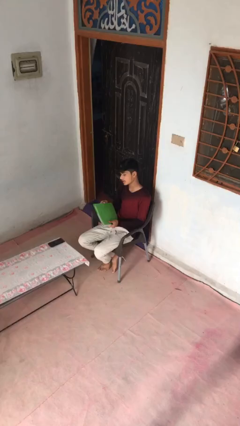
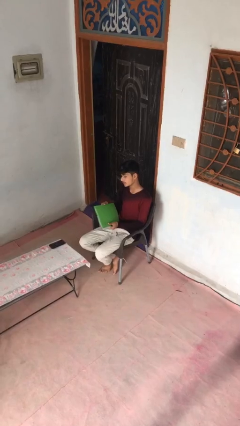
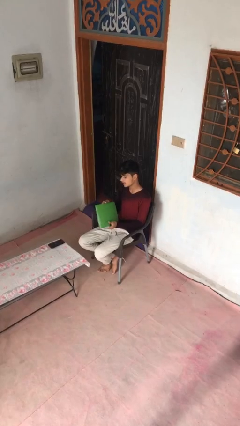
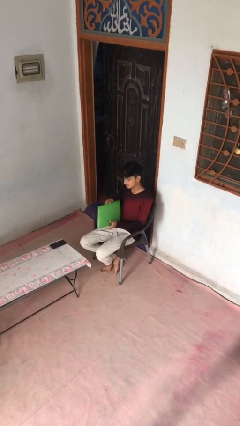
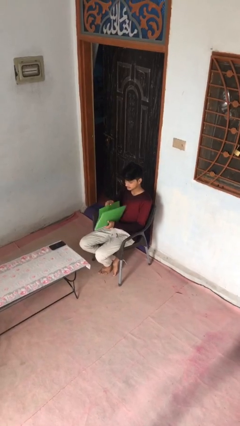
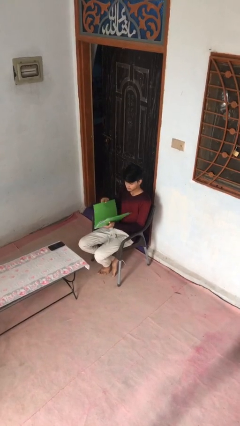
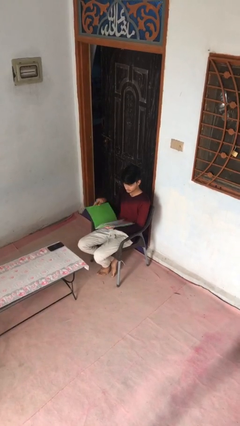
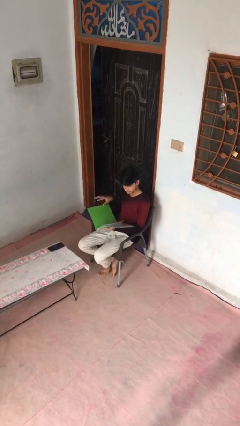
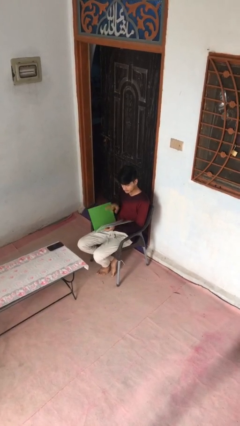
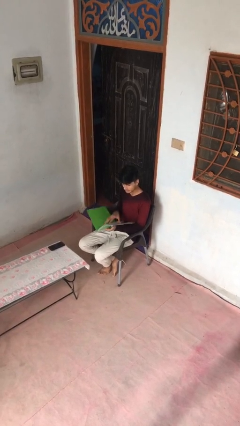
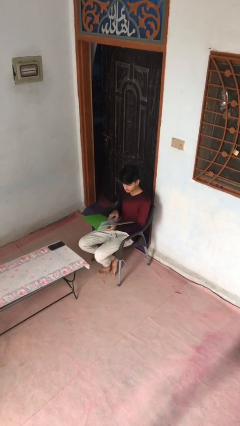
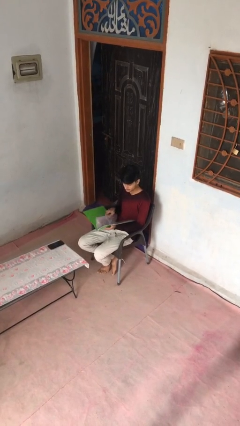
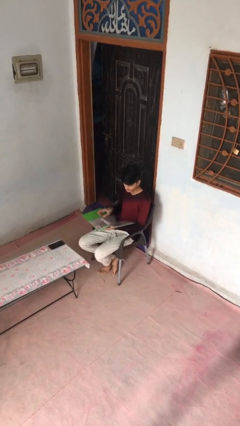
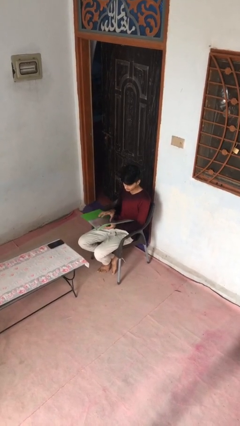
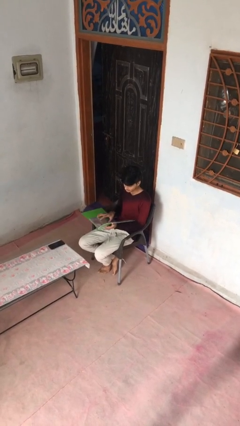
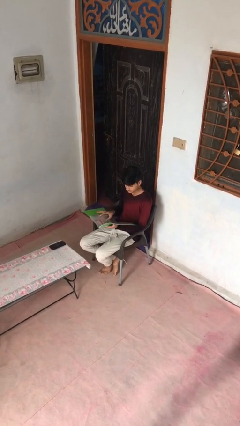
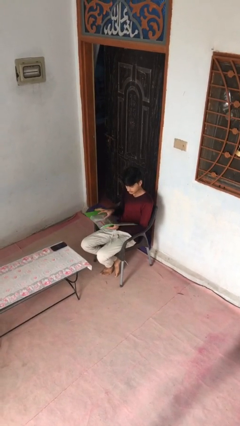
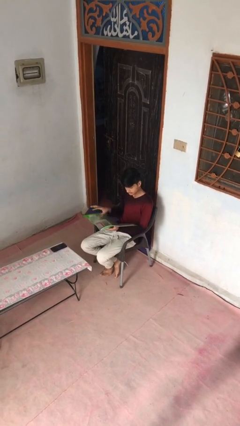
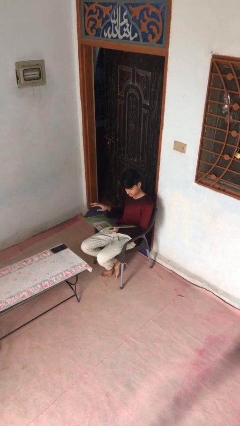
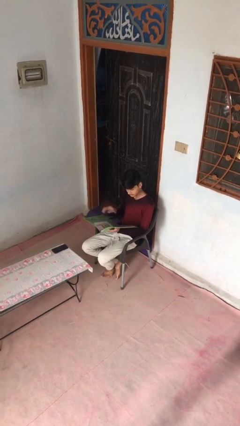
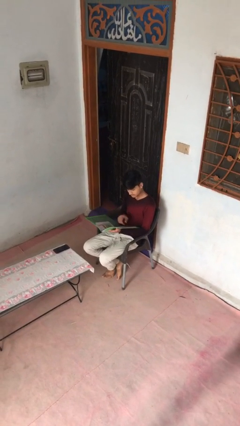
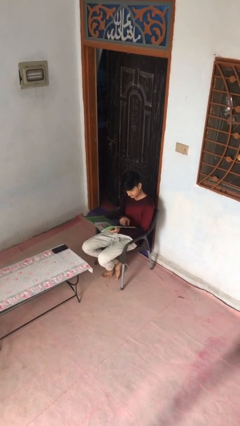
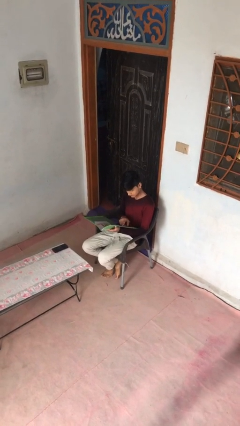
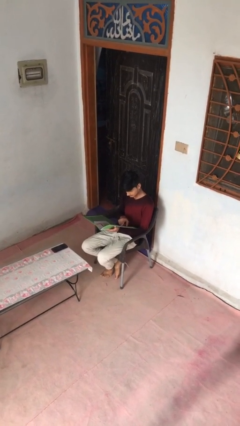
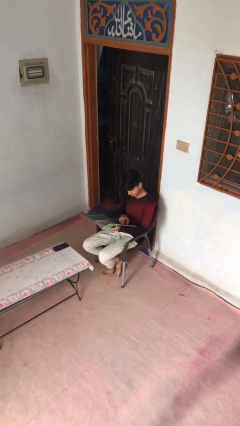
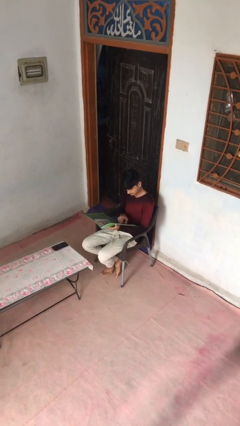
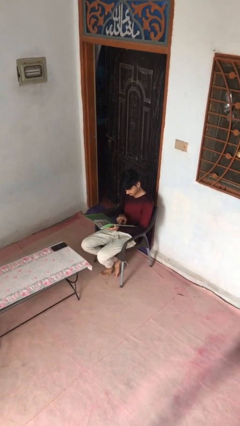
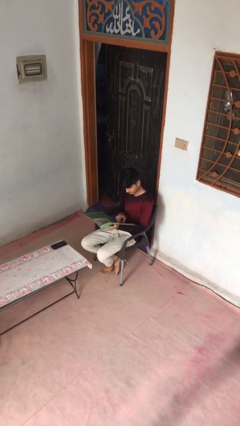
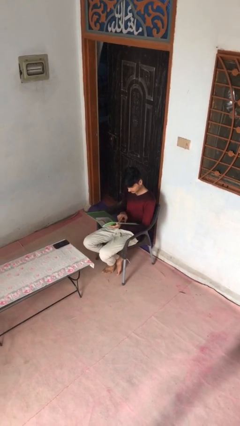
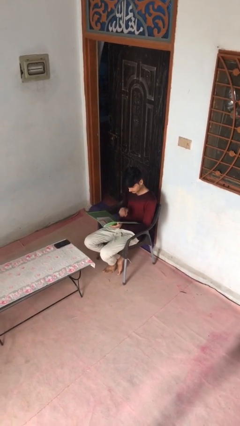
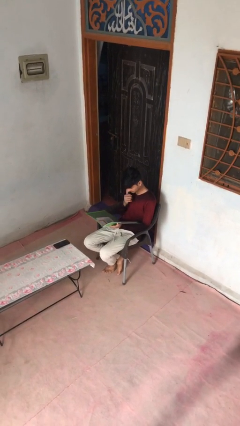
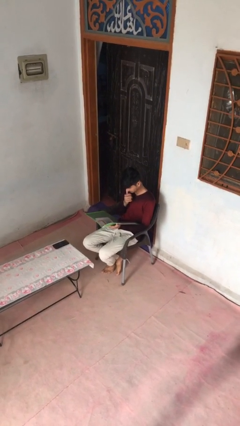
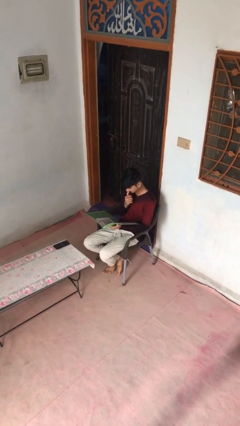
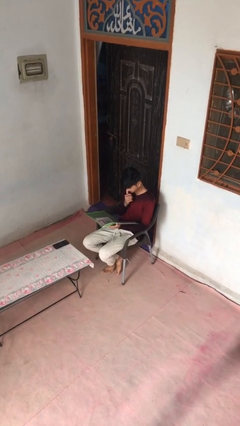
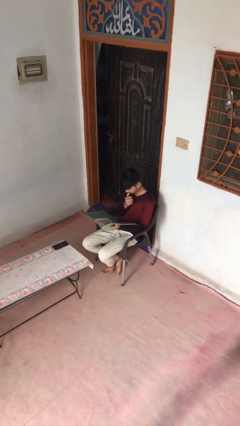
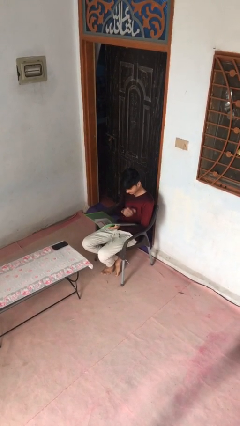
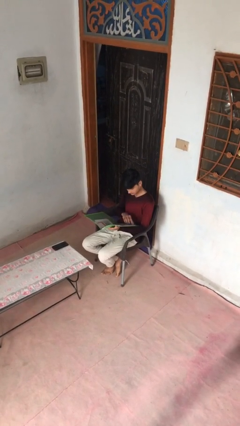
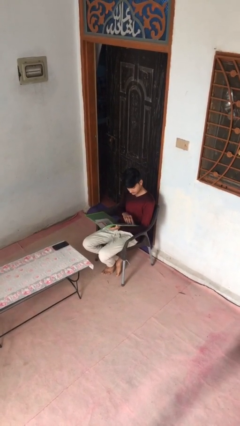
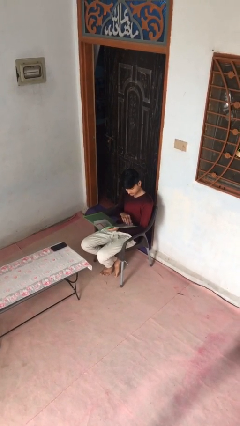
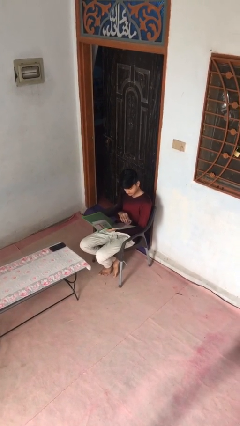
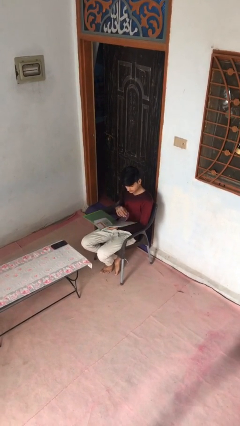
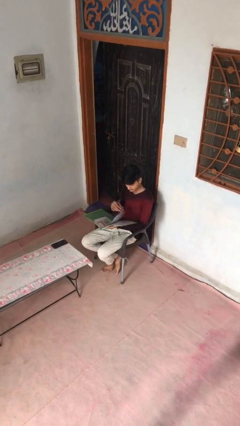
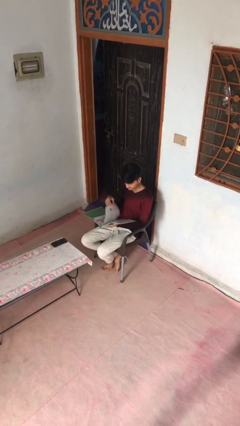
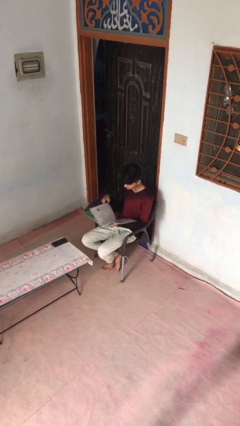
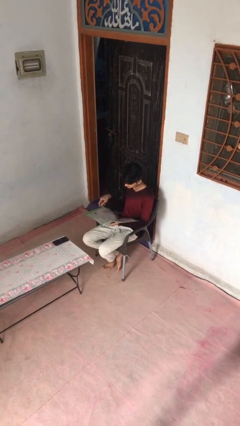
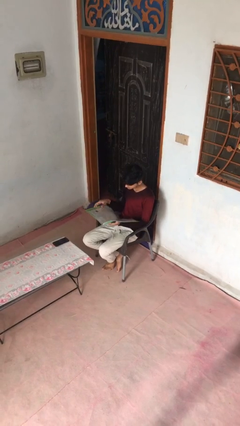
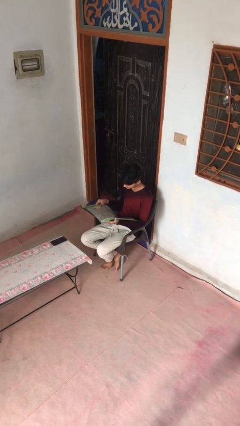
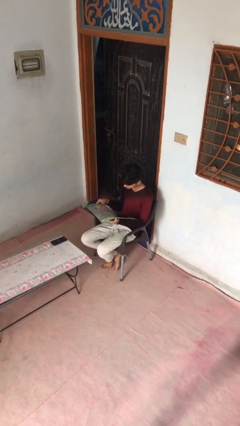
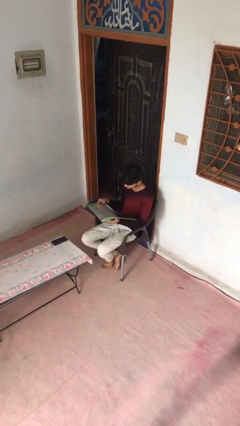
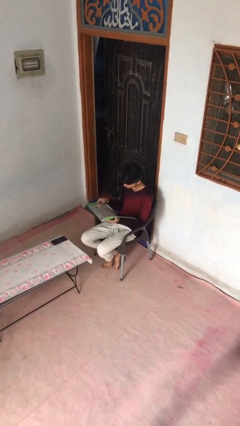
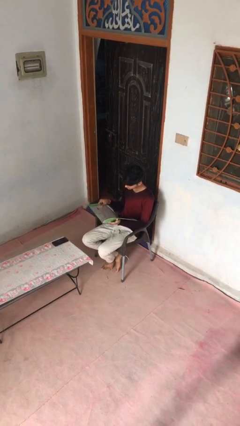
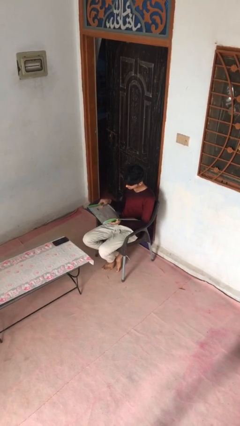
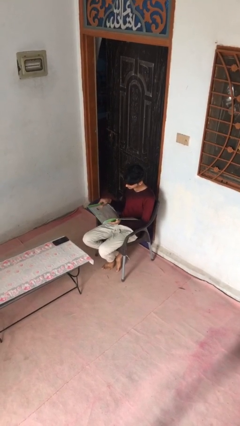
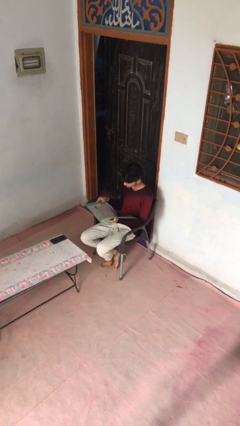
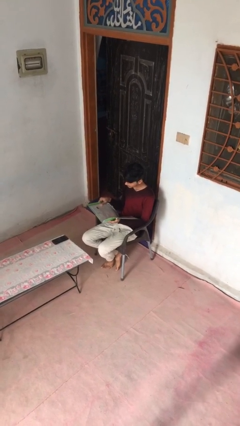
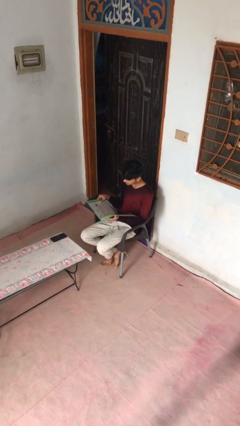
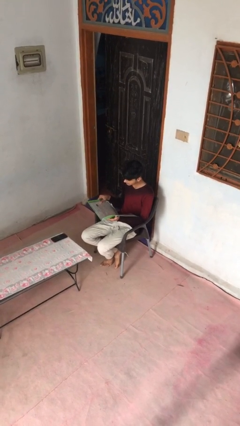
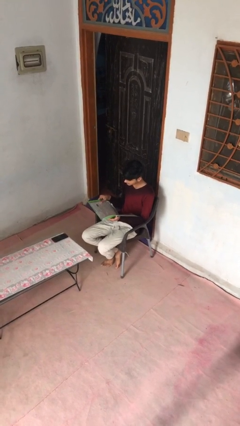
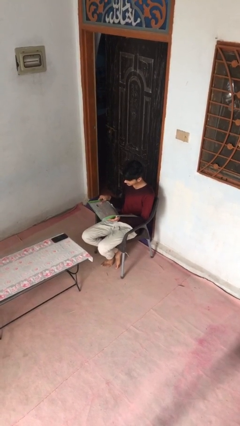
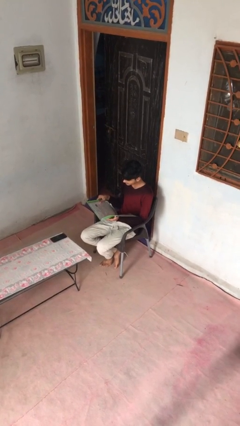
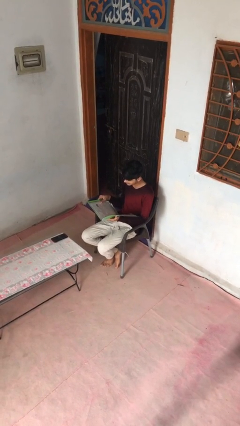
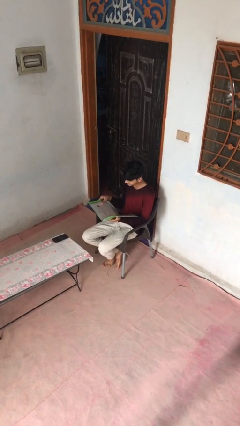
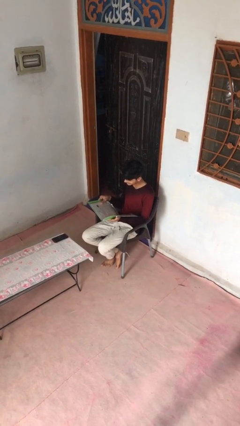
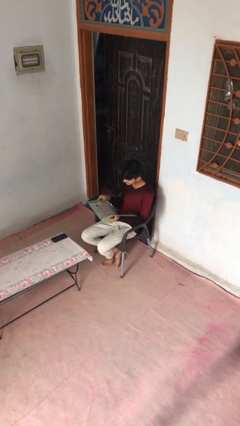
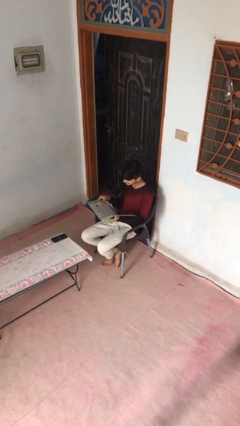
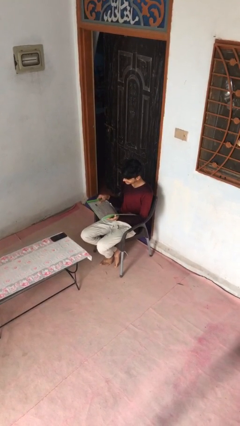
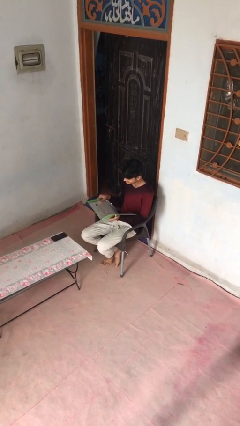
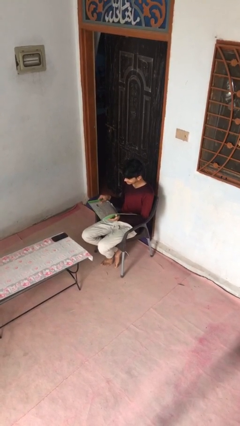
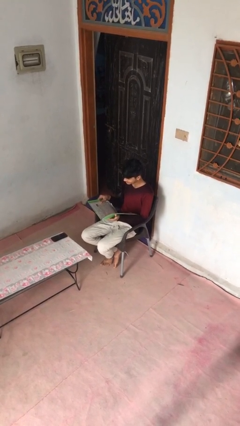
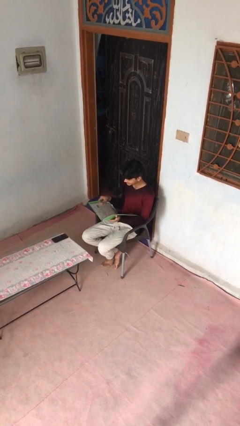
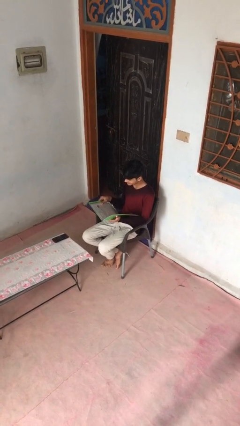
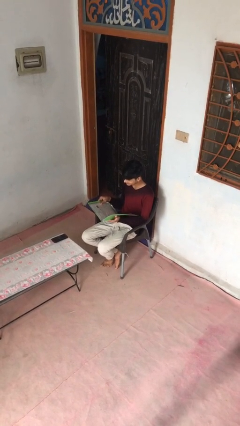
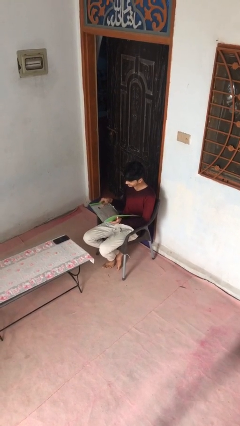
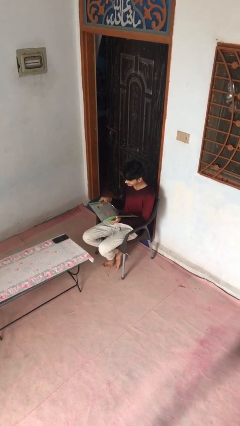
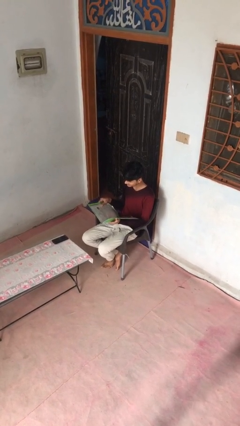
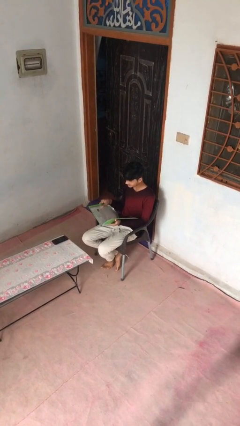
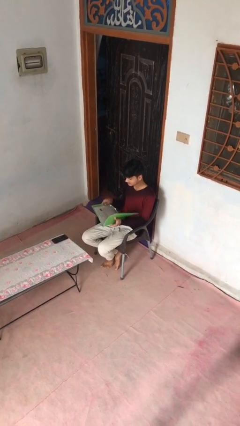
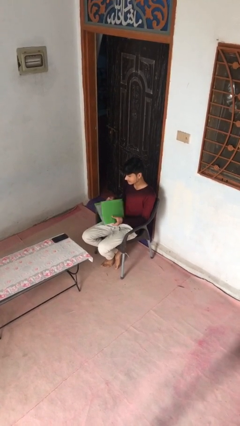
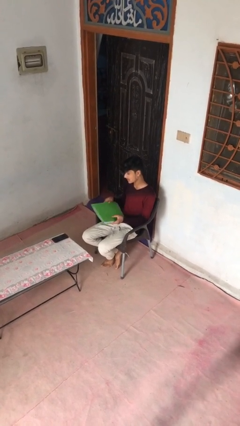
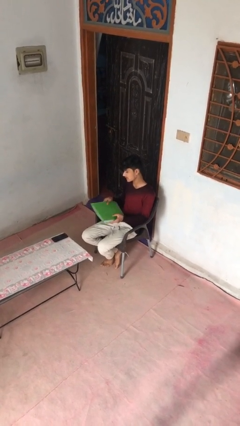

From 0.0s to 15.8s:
person reads document

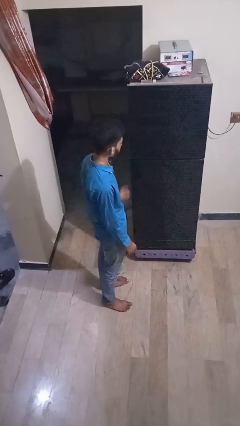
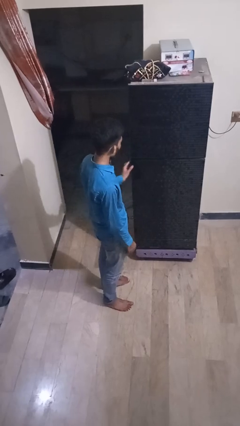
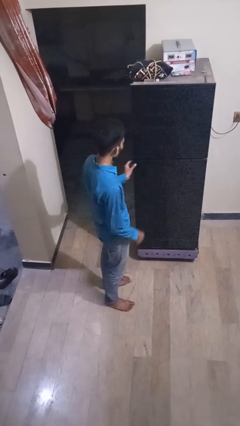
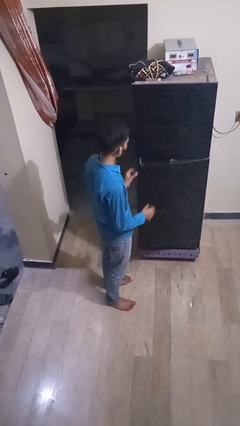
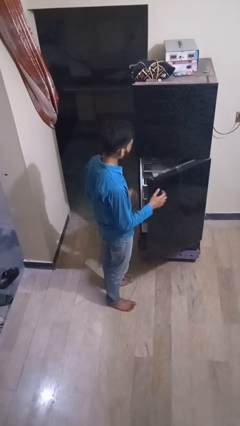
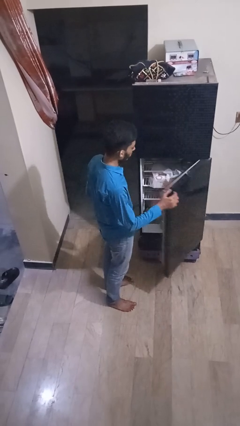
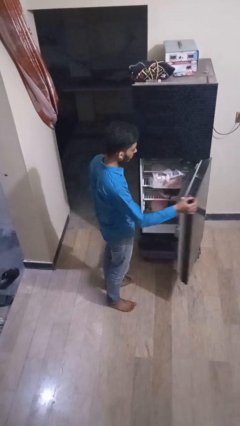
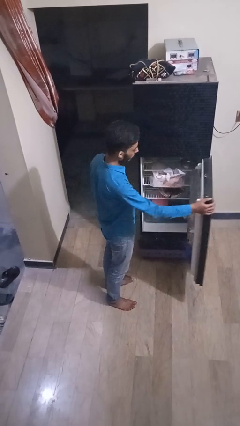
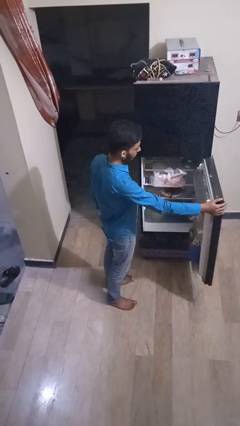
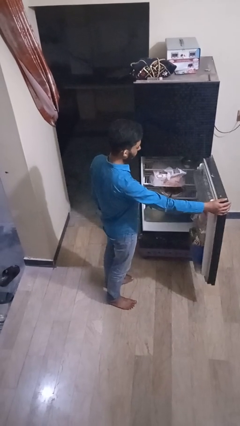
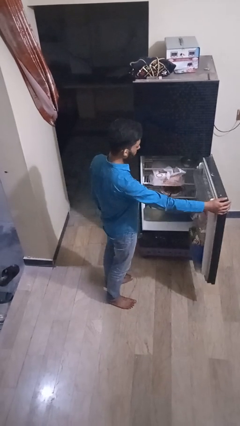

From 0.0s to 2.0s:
person opens refrigerator

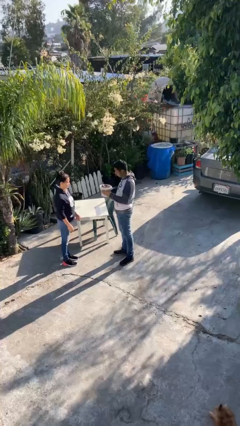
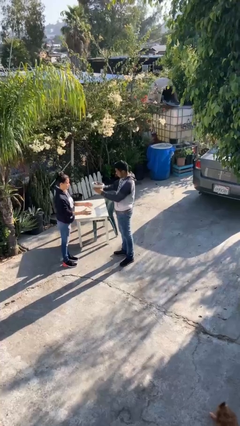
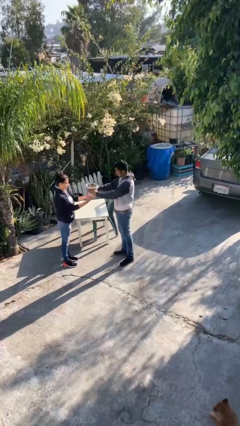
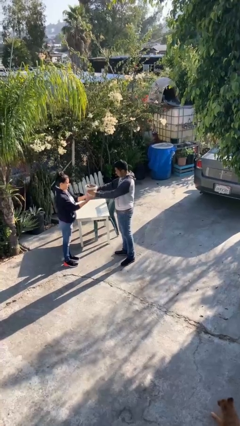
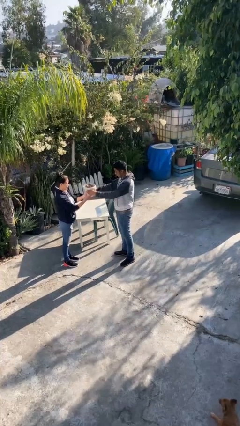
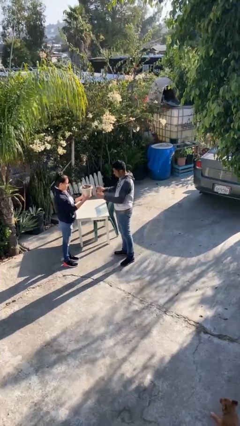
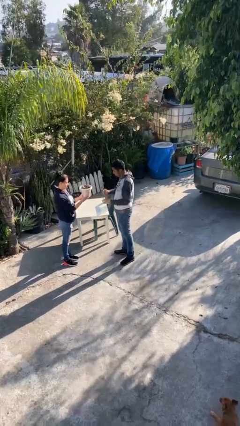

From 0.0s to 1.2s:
person transfers object to person
